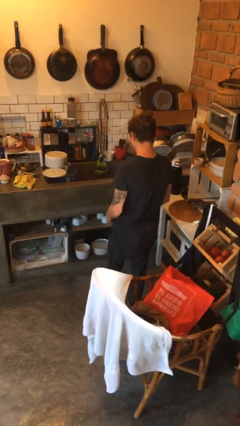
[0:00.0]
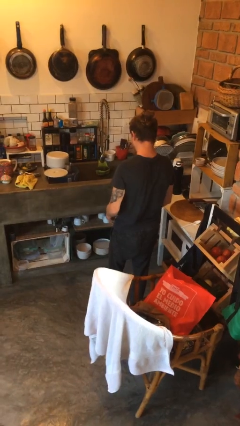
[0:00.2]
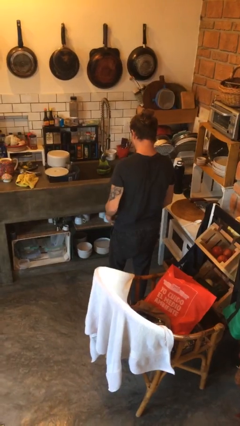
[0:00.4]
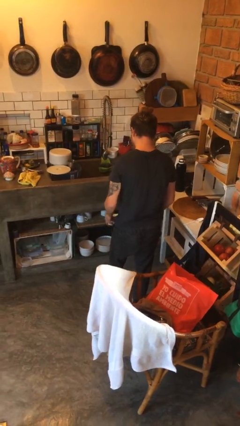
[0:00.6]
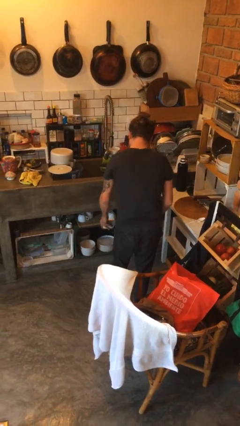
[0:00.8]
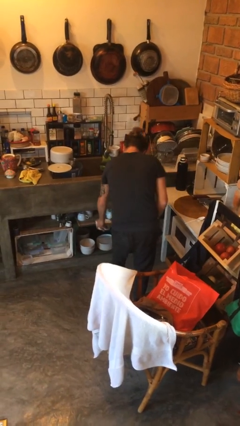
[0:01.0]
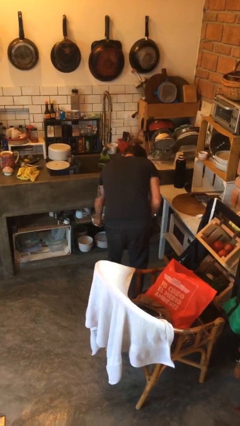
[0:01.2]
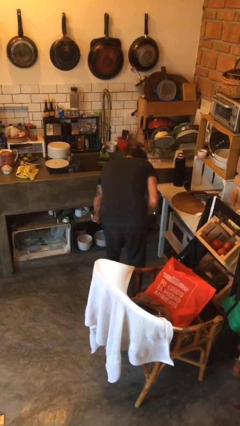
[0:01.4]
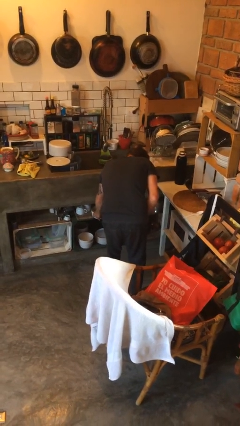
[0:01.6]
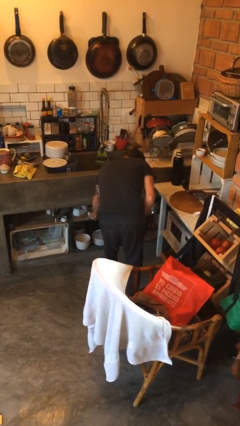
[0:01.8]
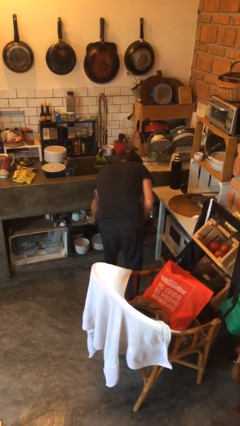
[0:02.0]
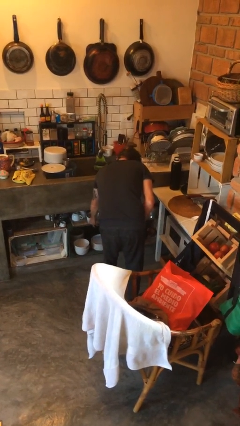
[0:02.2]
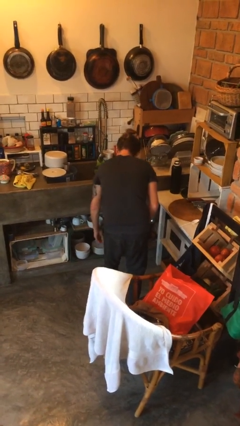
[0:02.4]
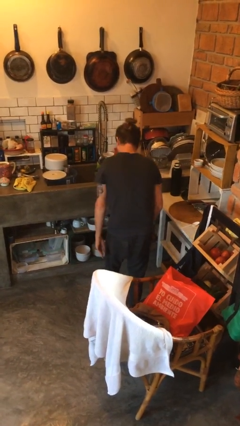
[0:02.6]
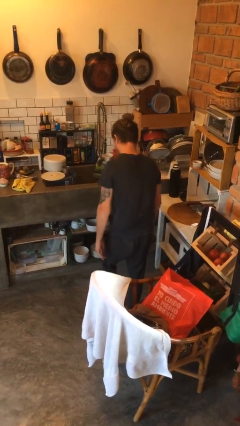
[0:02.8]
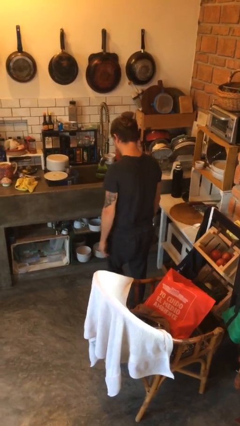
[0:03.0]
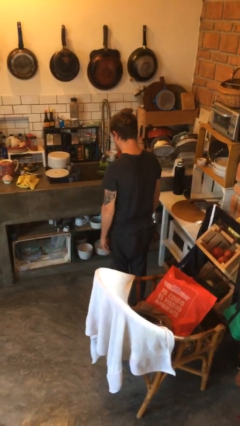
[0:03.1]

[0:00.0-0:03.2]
person puts down object into cabinet

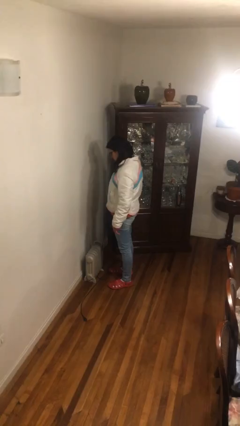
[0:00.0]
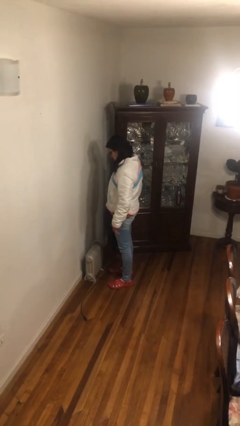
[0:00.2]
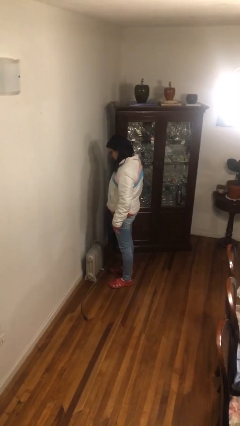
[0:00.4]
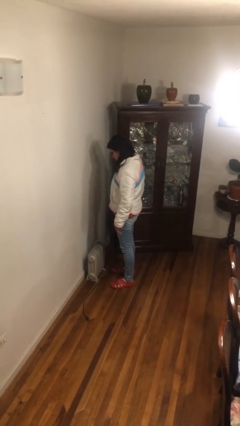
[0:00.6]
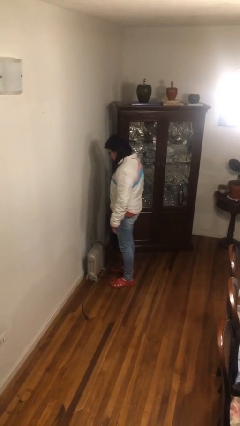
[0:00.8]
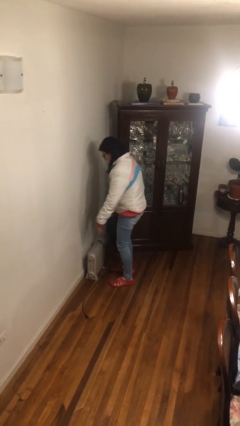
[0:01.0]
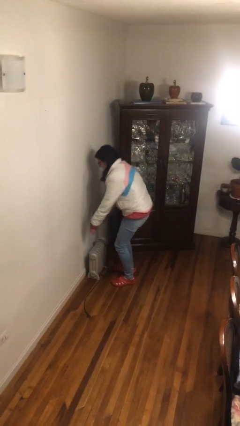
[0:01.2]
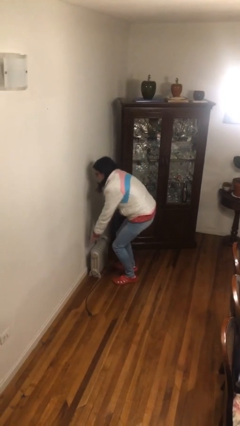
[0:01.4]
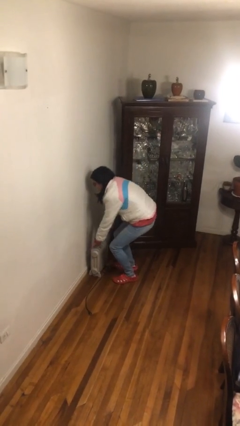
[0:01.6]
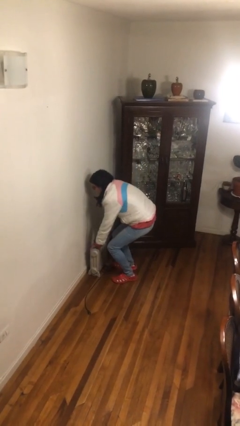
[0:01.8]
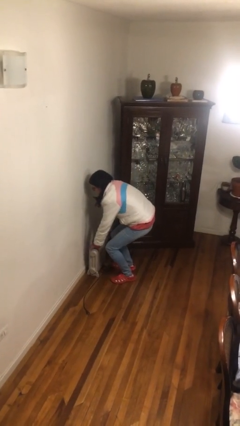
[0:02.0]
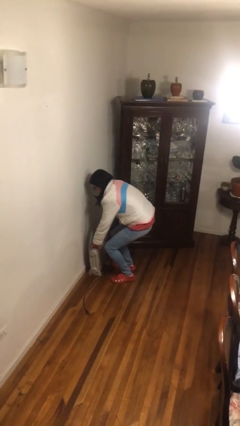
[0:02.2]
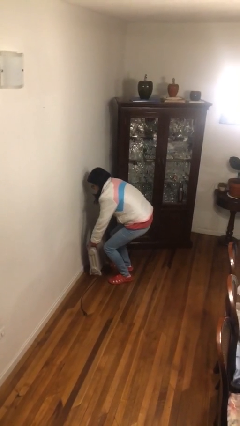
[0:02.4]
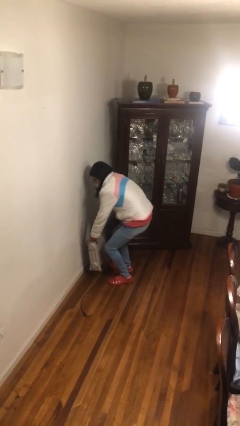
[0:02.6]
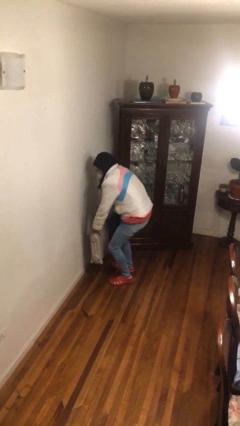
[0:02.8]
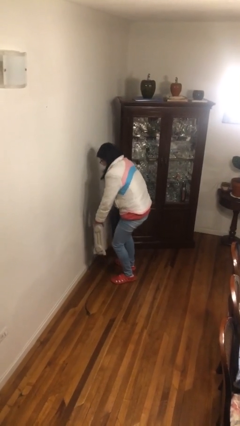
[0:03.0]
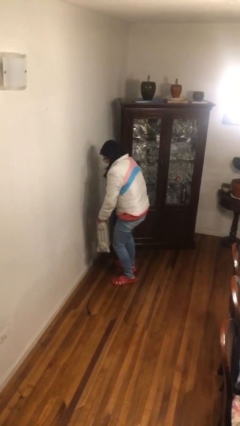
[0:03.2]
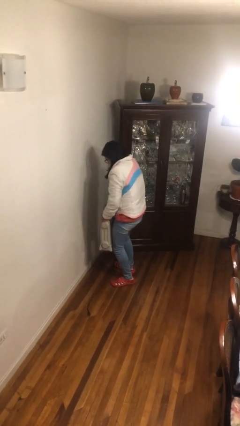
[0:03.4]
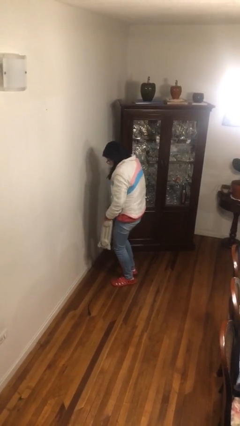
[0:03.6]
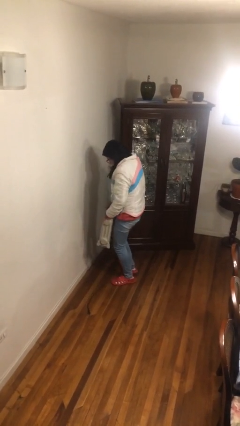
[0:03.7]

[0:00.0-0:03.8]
person picks up object from floor

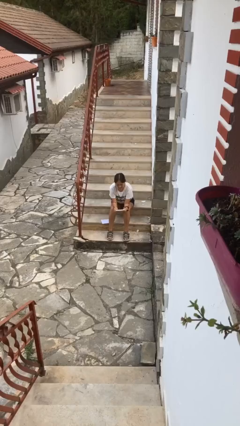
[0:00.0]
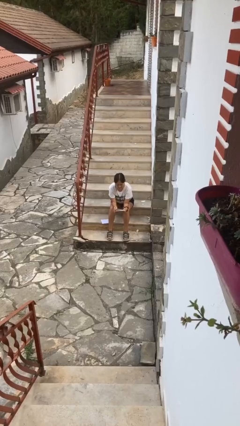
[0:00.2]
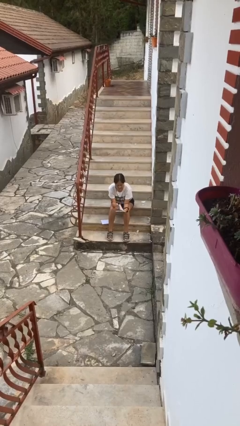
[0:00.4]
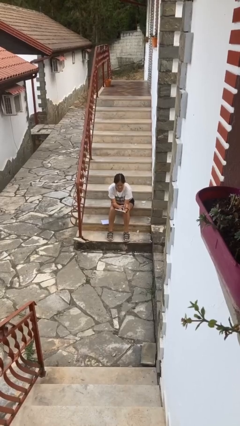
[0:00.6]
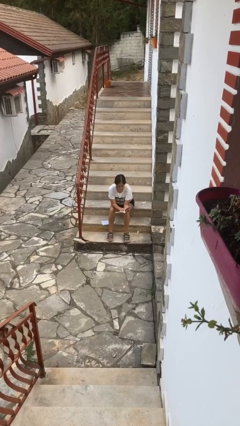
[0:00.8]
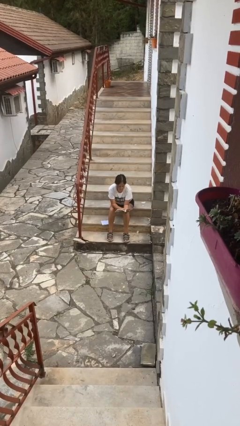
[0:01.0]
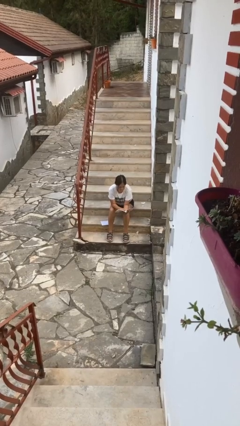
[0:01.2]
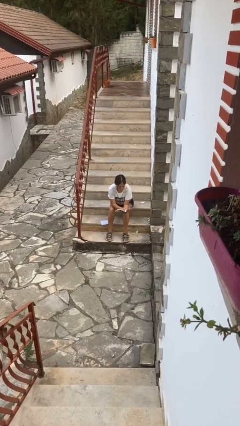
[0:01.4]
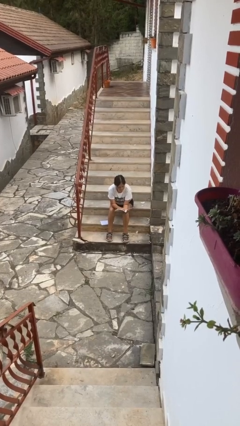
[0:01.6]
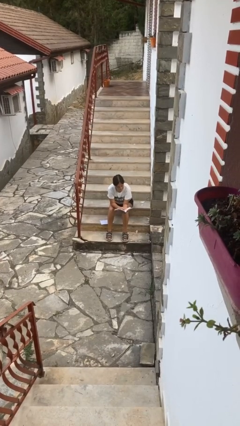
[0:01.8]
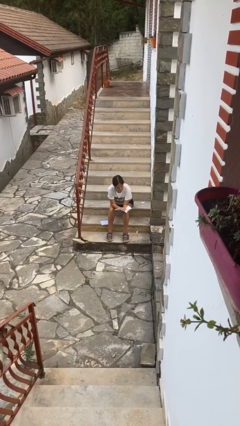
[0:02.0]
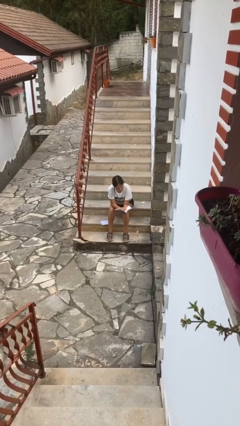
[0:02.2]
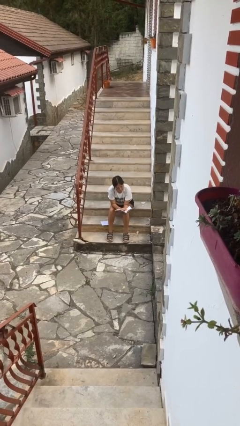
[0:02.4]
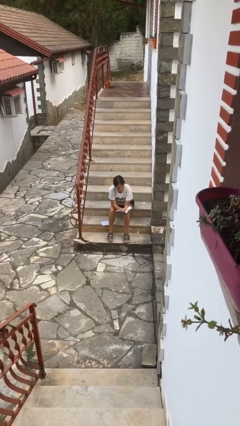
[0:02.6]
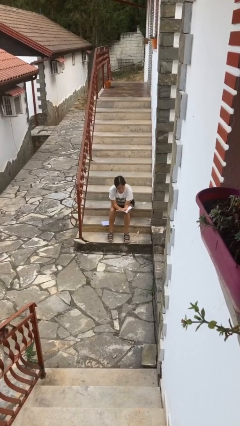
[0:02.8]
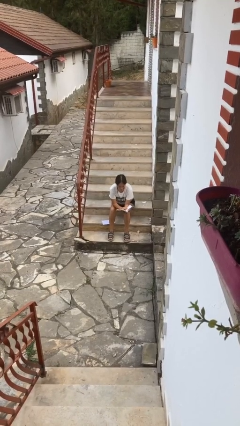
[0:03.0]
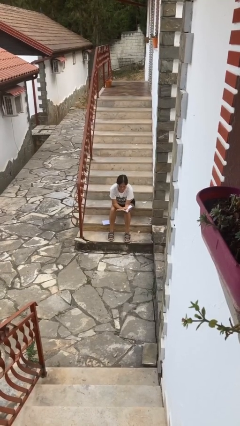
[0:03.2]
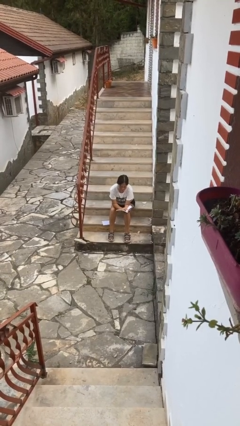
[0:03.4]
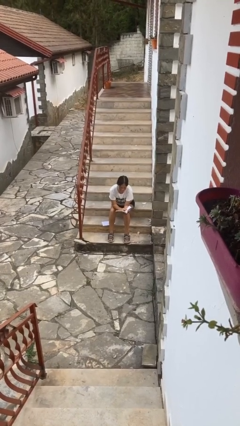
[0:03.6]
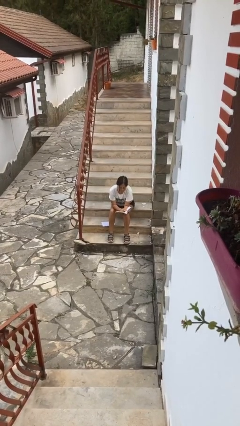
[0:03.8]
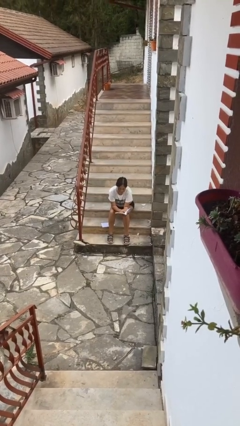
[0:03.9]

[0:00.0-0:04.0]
person reads book

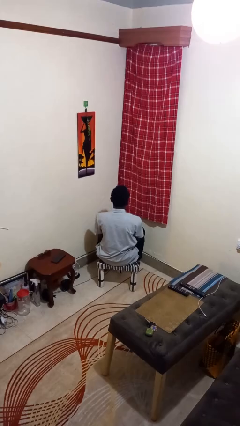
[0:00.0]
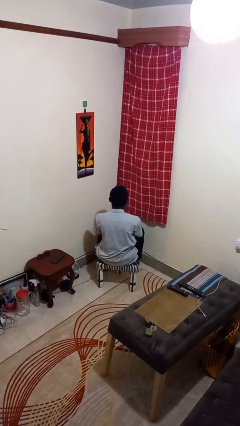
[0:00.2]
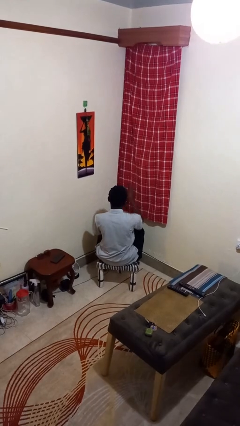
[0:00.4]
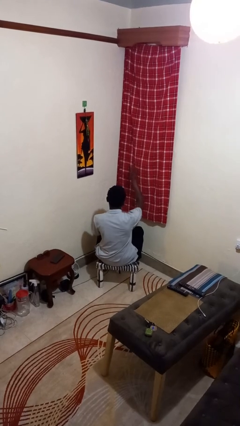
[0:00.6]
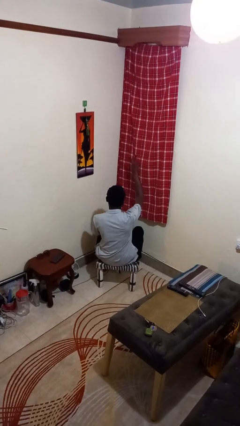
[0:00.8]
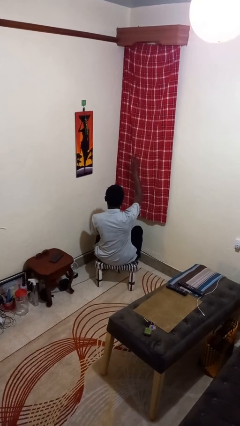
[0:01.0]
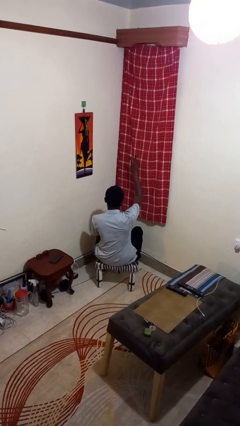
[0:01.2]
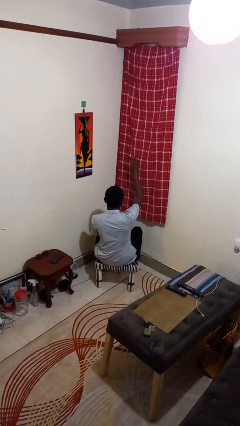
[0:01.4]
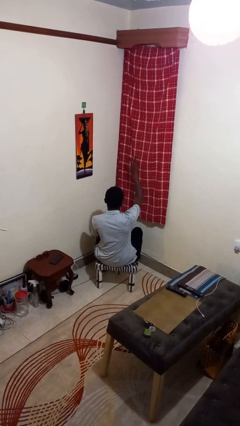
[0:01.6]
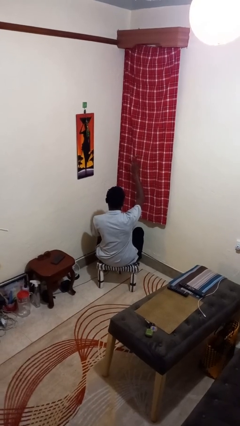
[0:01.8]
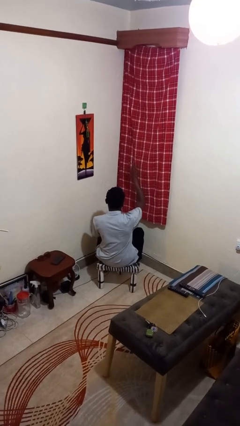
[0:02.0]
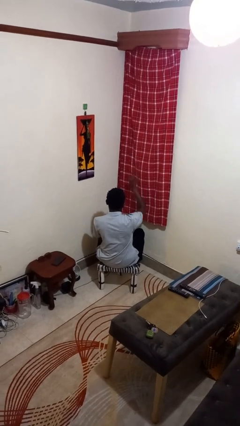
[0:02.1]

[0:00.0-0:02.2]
person gestures peace

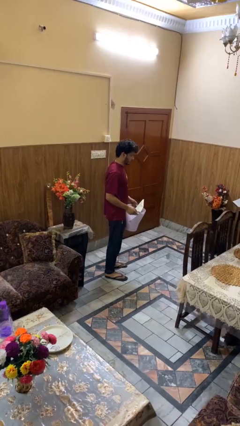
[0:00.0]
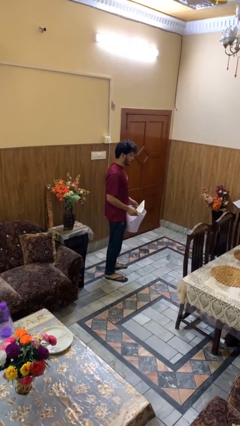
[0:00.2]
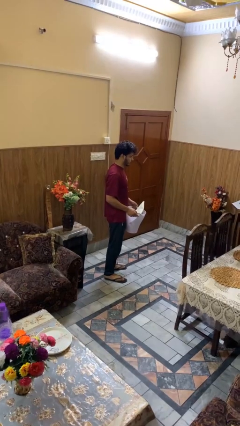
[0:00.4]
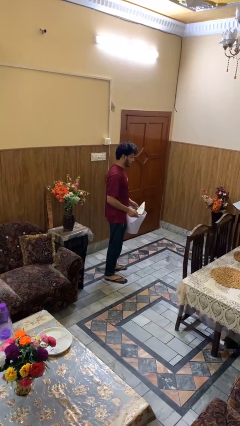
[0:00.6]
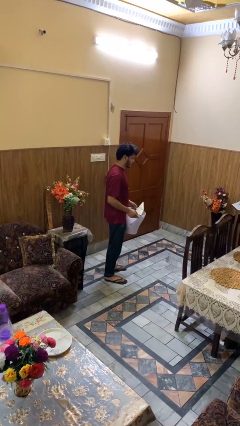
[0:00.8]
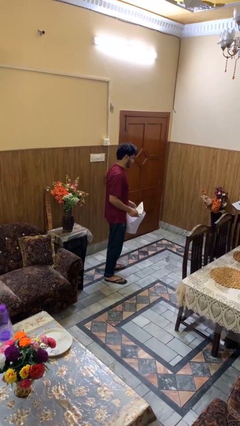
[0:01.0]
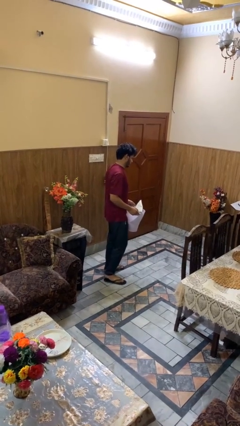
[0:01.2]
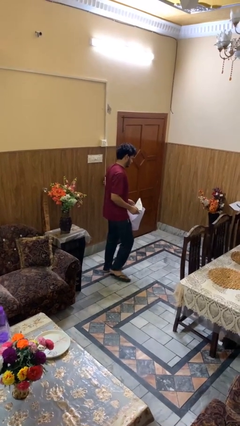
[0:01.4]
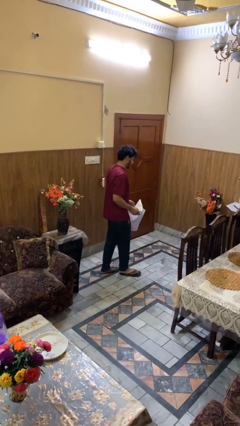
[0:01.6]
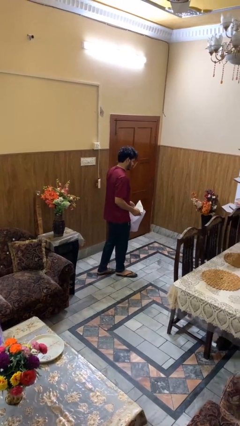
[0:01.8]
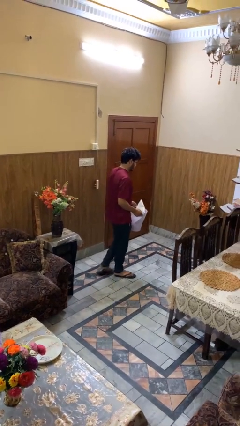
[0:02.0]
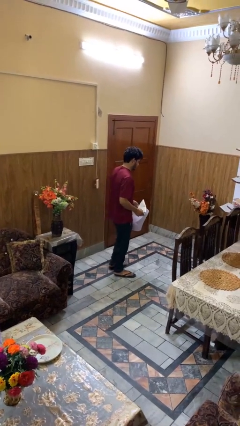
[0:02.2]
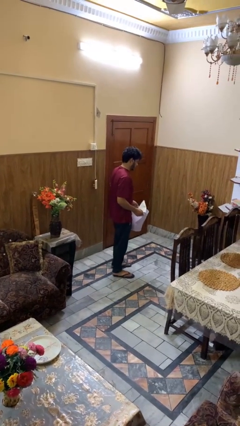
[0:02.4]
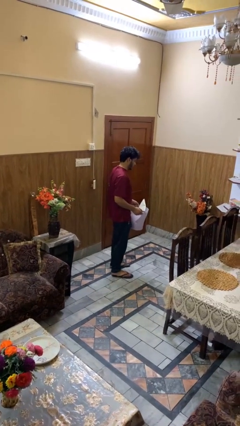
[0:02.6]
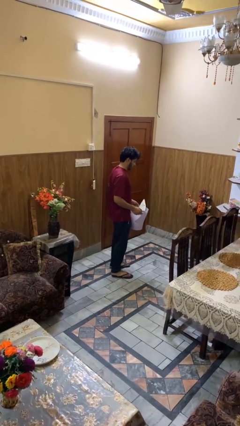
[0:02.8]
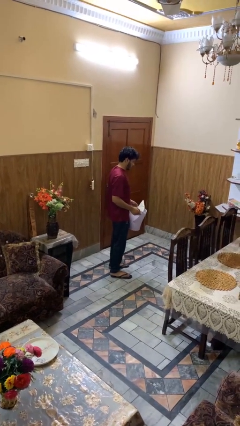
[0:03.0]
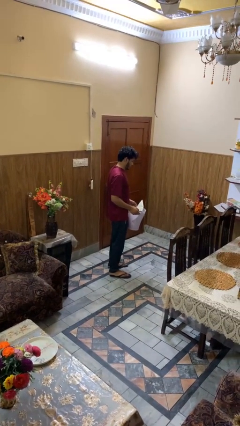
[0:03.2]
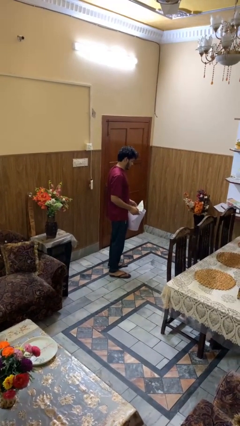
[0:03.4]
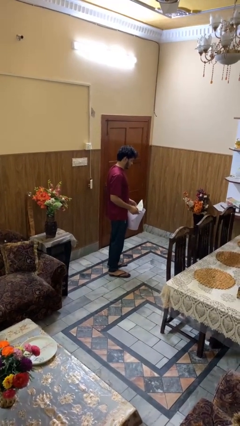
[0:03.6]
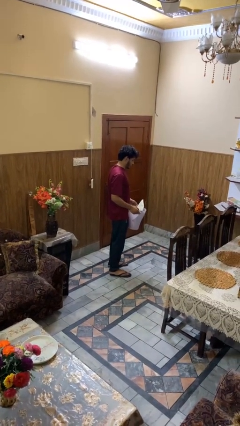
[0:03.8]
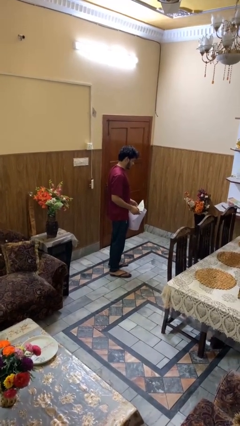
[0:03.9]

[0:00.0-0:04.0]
person carries laundry basket

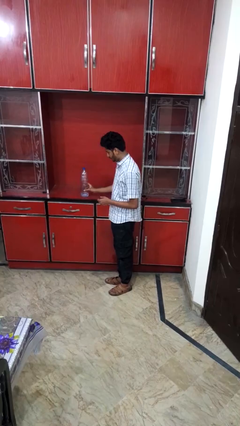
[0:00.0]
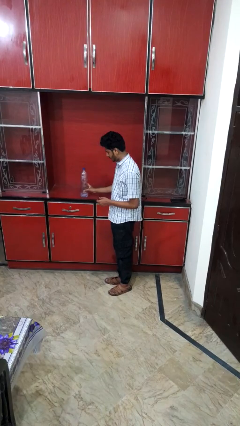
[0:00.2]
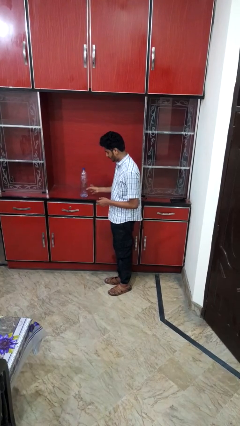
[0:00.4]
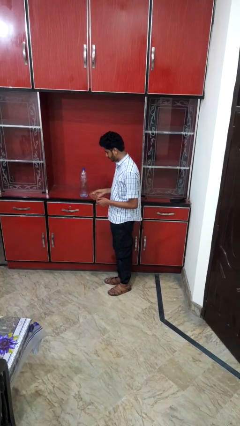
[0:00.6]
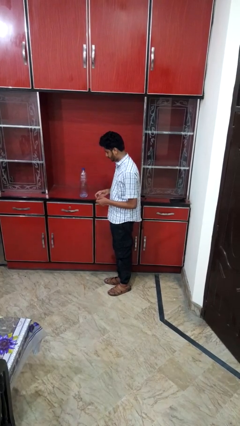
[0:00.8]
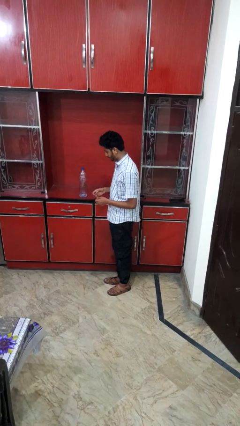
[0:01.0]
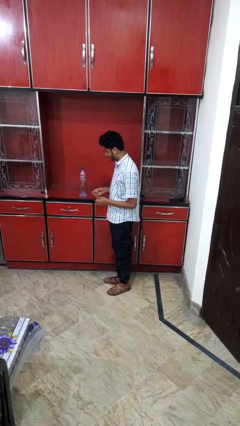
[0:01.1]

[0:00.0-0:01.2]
person puts down object on countertop
